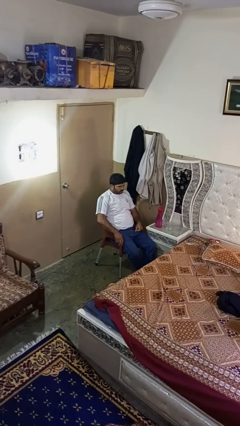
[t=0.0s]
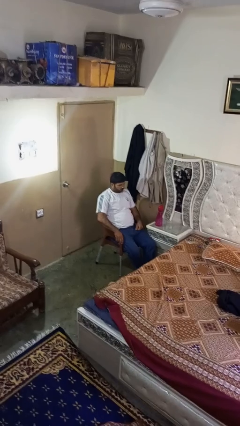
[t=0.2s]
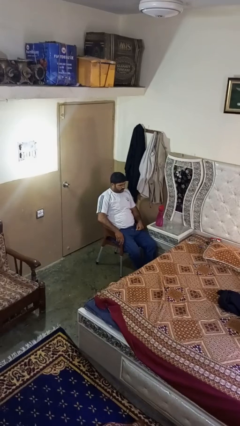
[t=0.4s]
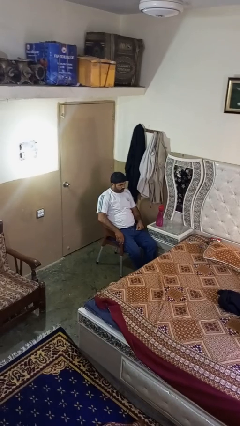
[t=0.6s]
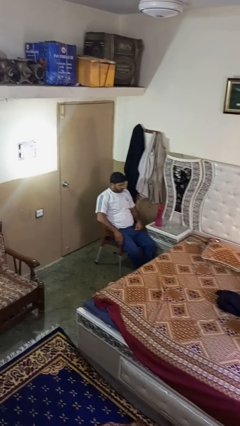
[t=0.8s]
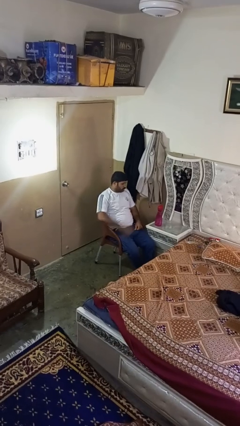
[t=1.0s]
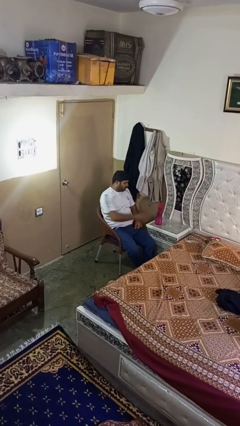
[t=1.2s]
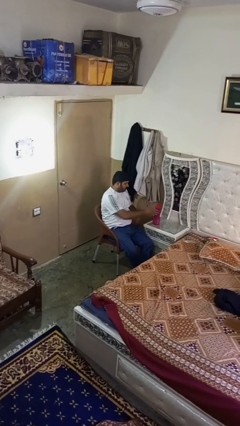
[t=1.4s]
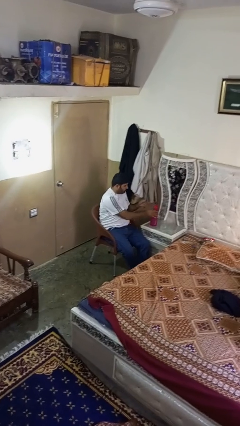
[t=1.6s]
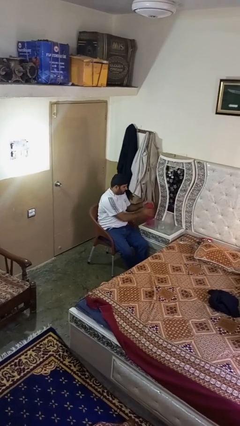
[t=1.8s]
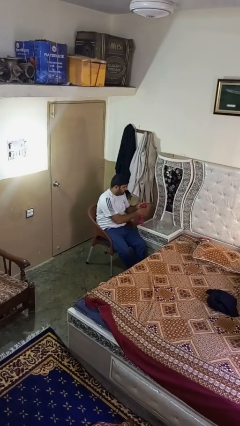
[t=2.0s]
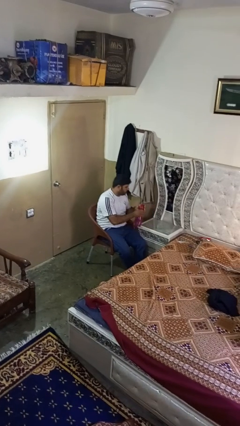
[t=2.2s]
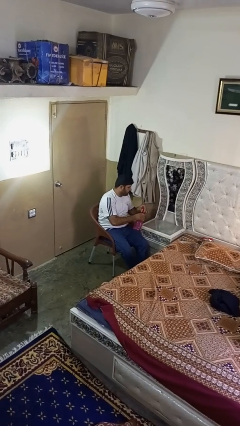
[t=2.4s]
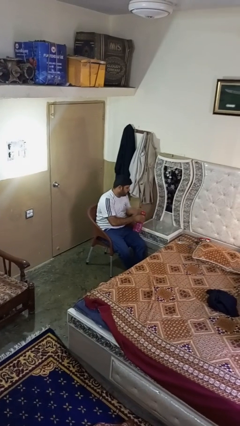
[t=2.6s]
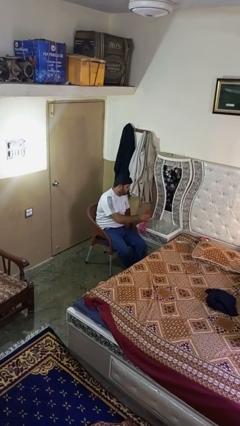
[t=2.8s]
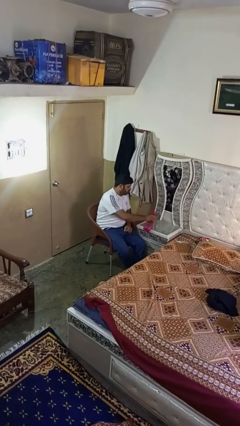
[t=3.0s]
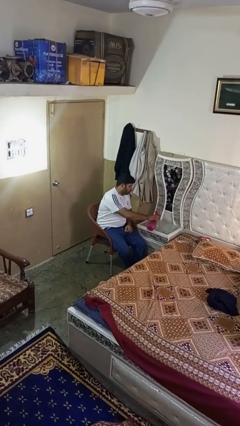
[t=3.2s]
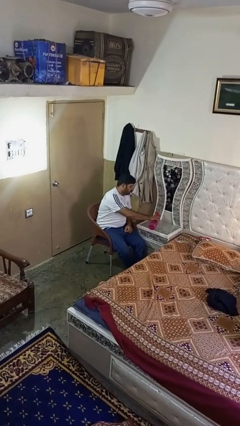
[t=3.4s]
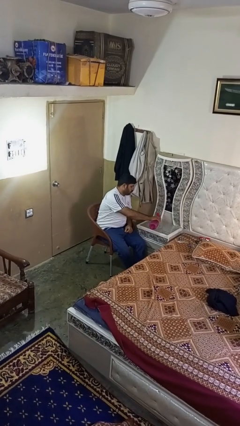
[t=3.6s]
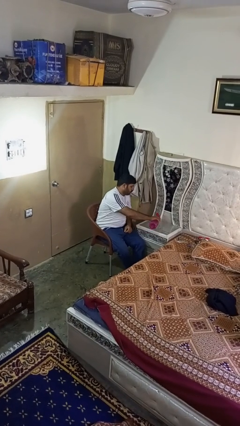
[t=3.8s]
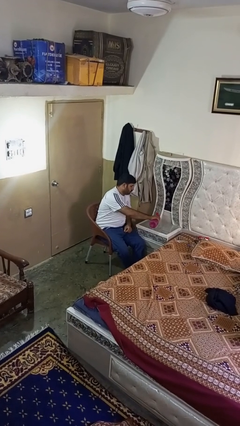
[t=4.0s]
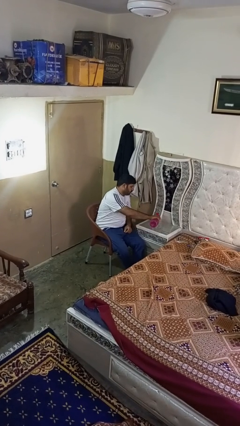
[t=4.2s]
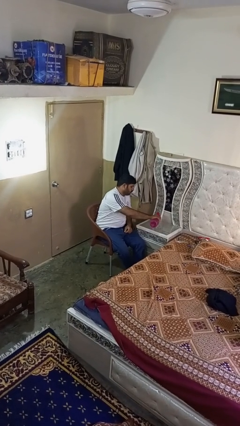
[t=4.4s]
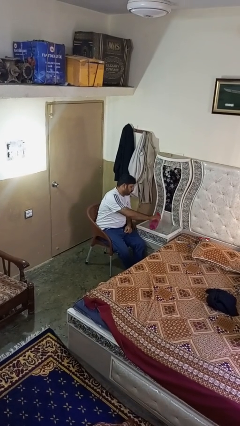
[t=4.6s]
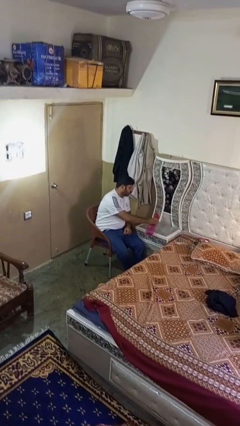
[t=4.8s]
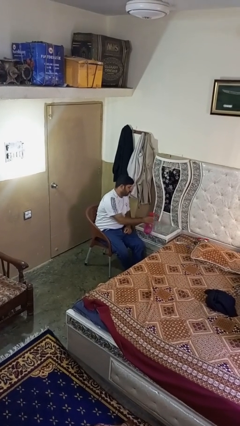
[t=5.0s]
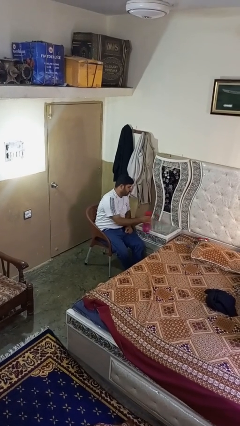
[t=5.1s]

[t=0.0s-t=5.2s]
person pours liquid into cup

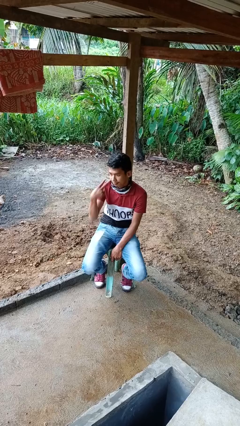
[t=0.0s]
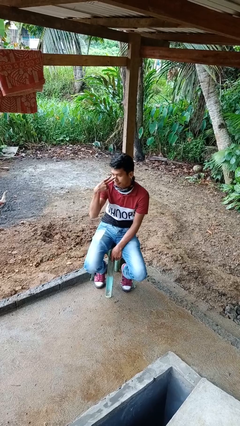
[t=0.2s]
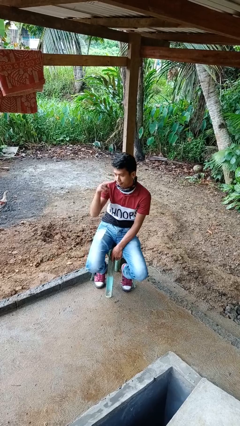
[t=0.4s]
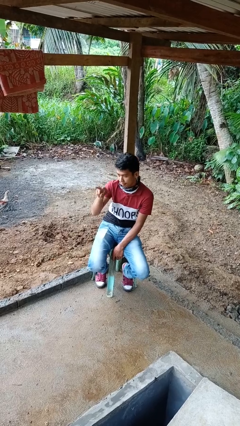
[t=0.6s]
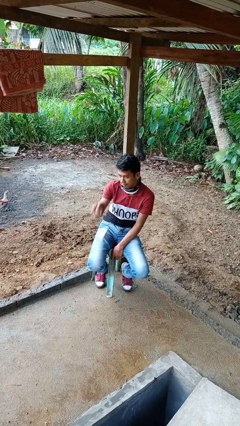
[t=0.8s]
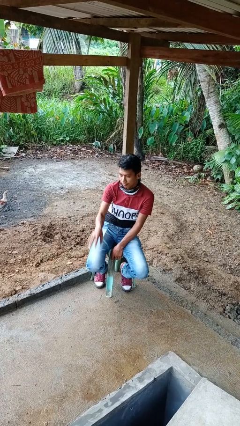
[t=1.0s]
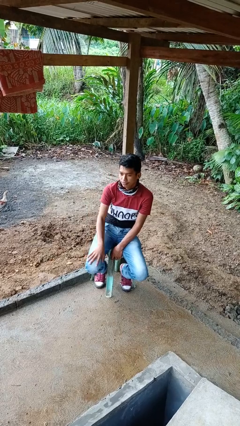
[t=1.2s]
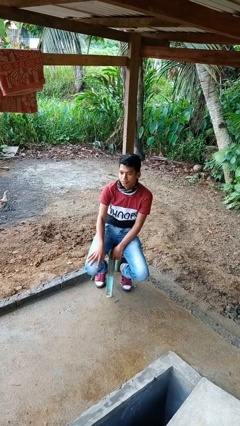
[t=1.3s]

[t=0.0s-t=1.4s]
person gestures watch closely

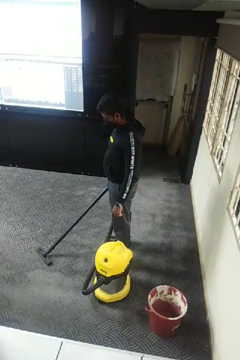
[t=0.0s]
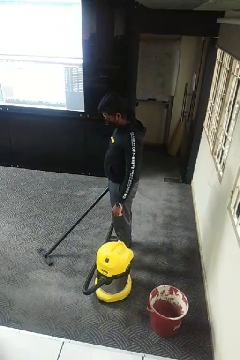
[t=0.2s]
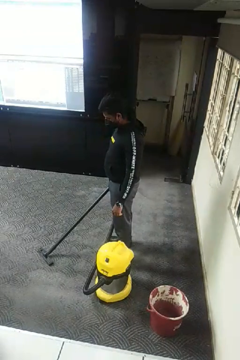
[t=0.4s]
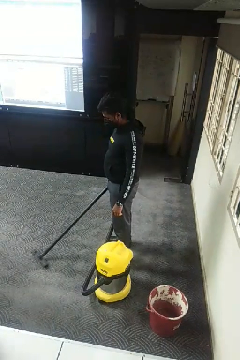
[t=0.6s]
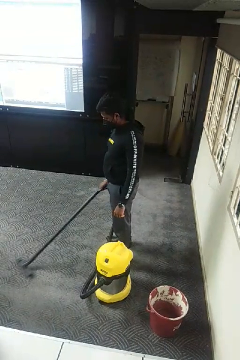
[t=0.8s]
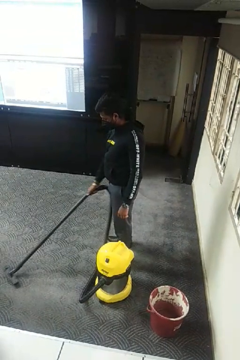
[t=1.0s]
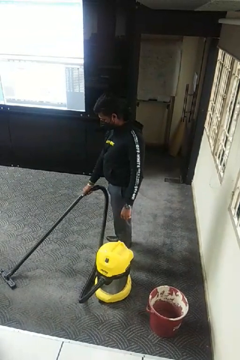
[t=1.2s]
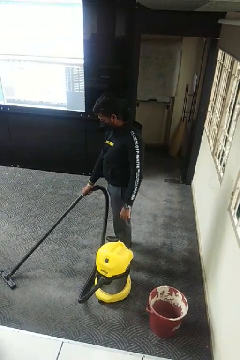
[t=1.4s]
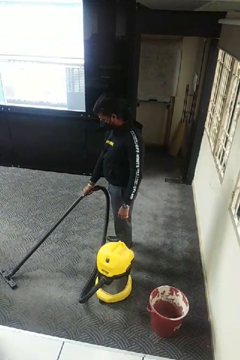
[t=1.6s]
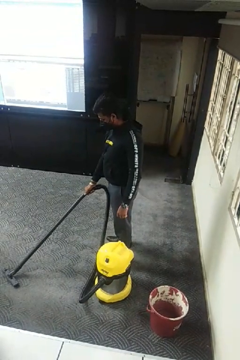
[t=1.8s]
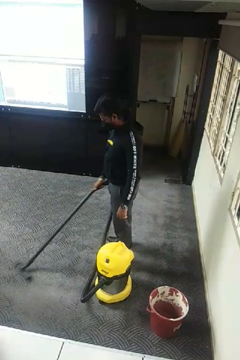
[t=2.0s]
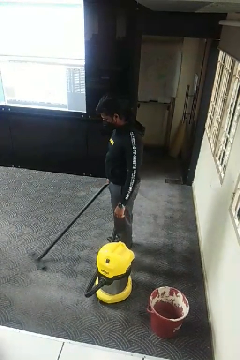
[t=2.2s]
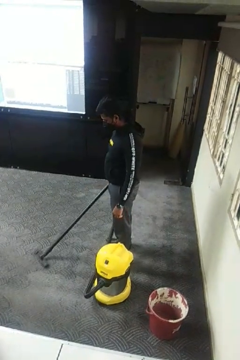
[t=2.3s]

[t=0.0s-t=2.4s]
person vacuums carpet

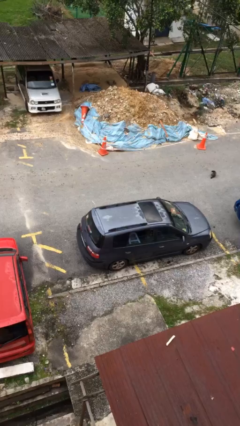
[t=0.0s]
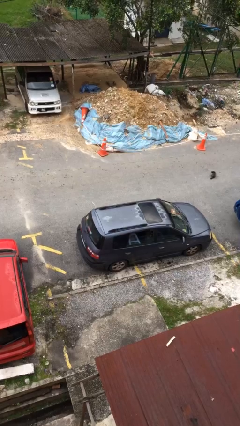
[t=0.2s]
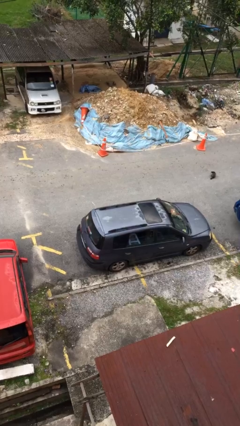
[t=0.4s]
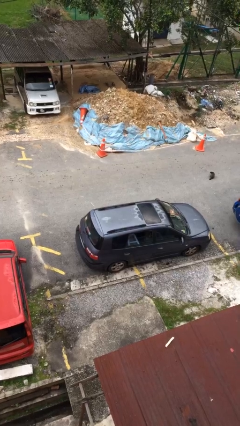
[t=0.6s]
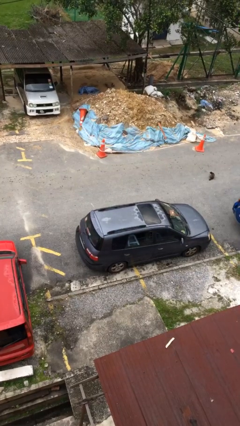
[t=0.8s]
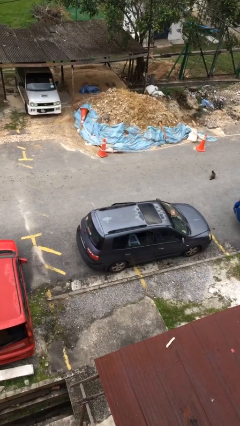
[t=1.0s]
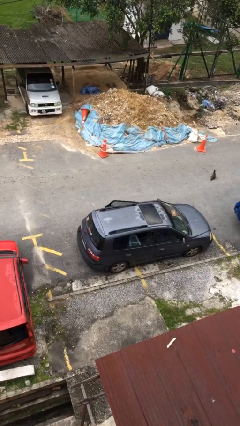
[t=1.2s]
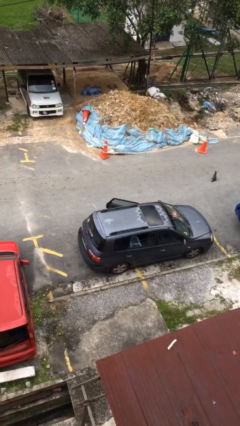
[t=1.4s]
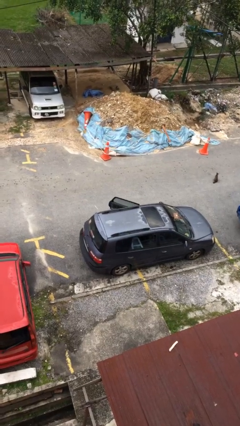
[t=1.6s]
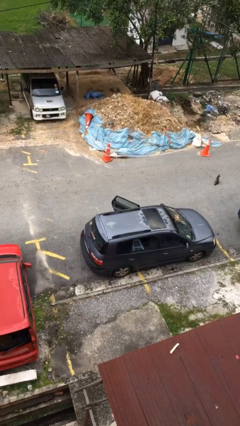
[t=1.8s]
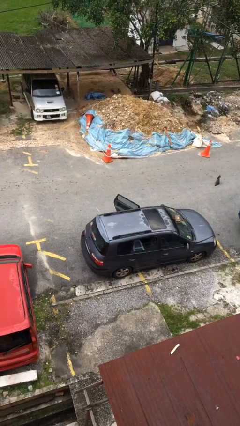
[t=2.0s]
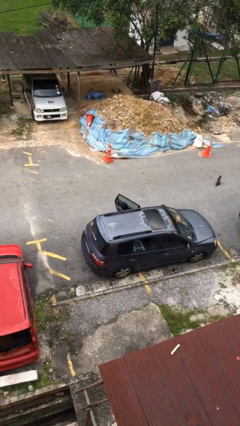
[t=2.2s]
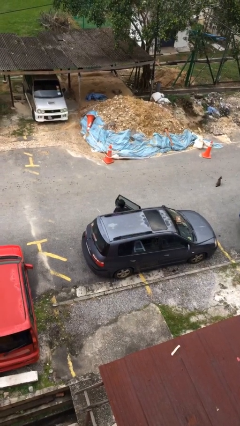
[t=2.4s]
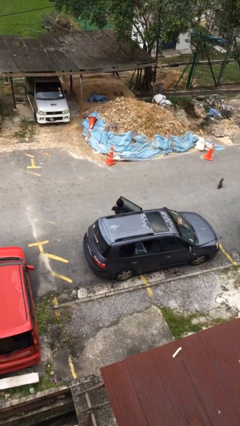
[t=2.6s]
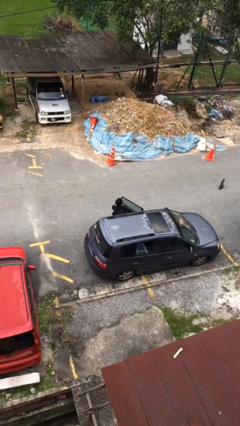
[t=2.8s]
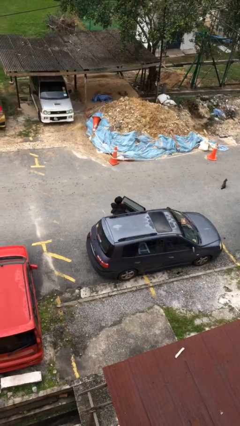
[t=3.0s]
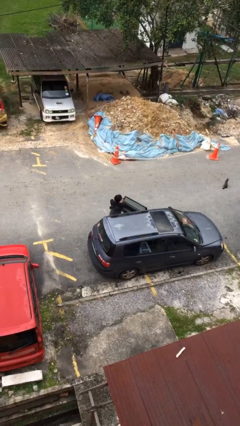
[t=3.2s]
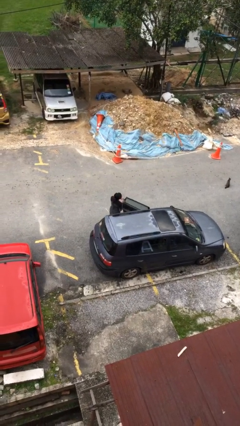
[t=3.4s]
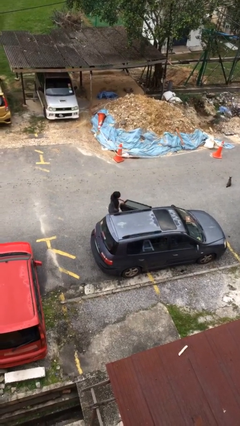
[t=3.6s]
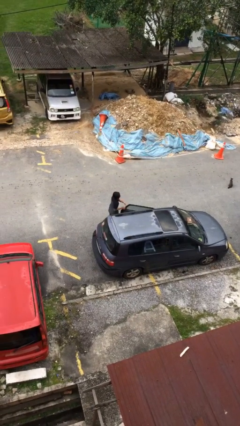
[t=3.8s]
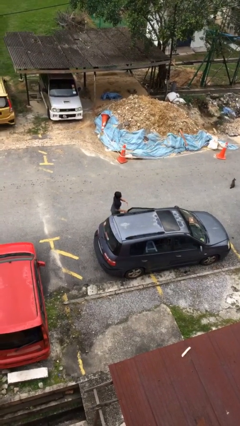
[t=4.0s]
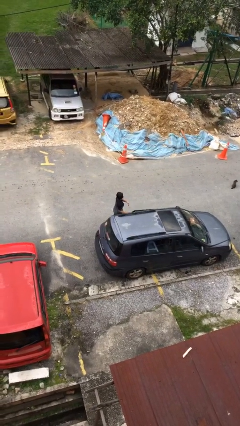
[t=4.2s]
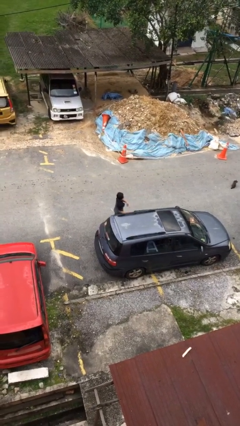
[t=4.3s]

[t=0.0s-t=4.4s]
person exits car

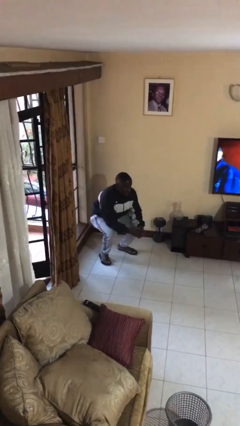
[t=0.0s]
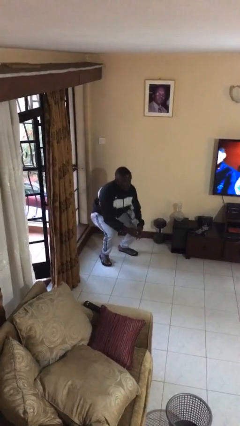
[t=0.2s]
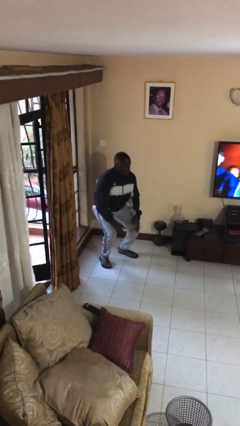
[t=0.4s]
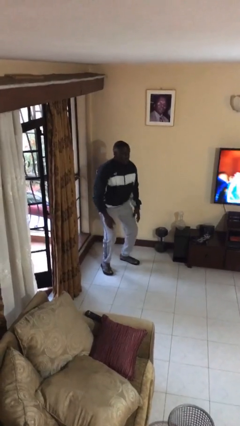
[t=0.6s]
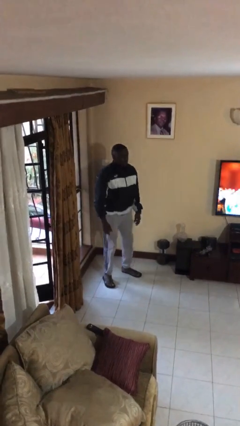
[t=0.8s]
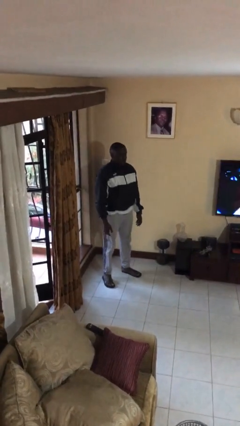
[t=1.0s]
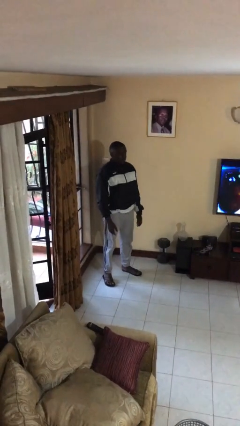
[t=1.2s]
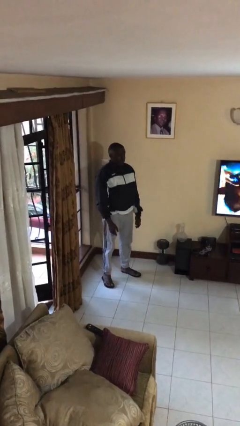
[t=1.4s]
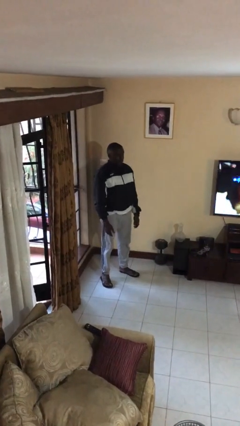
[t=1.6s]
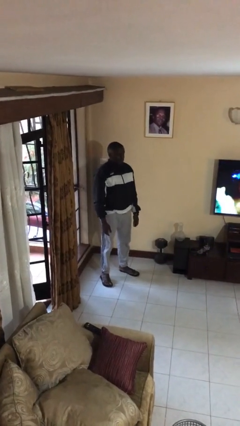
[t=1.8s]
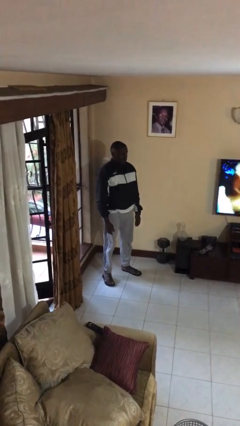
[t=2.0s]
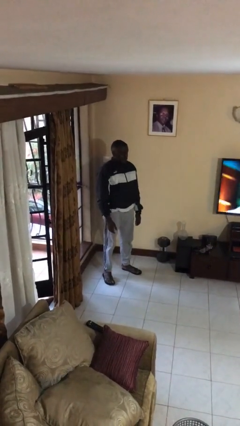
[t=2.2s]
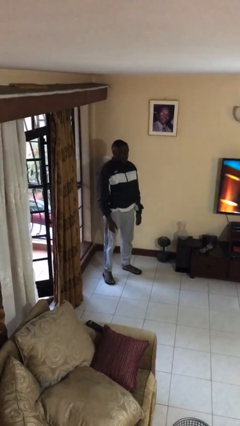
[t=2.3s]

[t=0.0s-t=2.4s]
person stands up

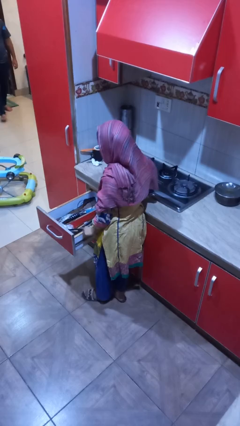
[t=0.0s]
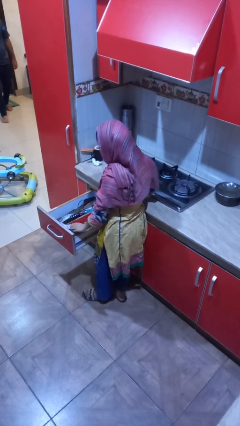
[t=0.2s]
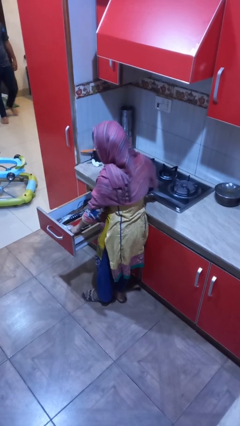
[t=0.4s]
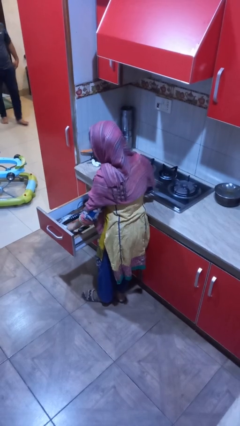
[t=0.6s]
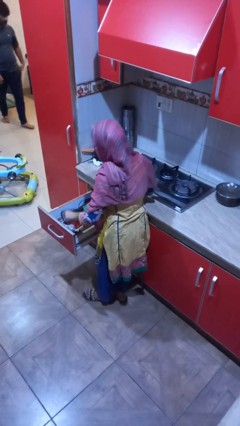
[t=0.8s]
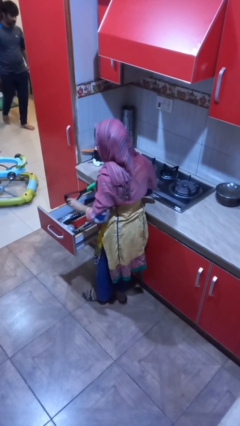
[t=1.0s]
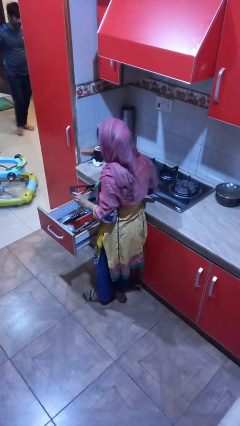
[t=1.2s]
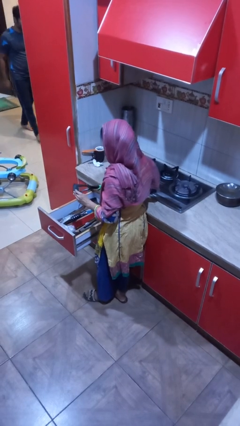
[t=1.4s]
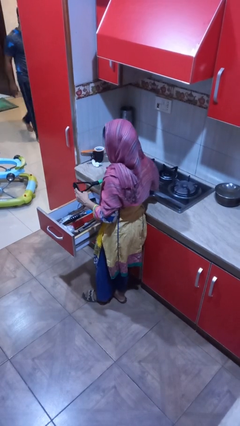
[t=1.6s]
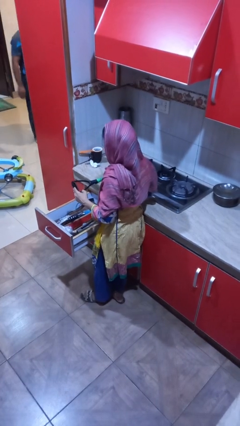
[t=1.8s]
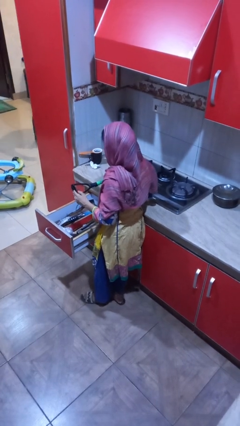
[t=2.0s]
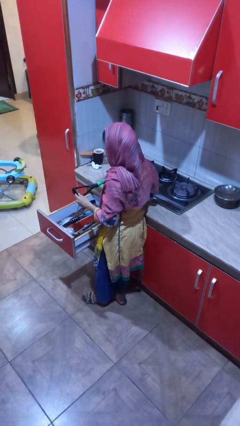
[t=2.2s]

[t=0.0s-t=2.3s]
person takes object from kitchen drawer
